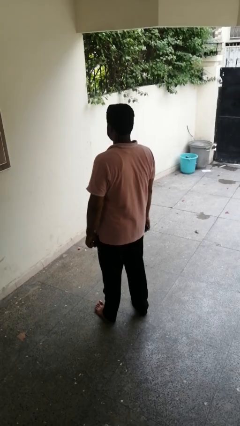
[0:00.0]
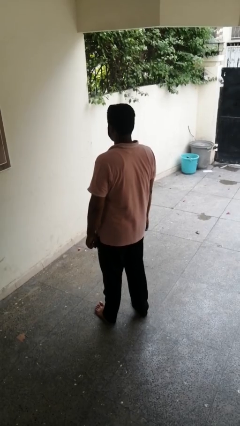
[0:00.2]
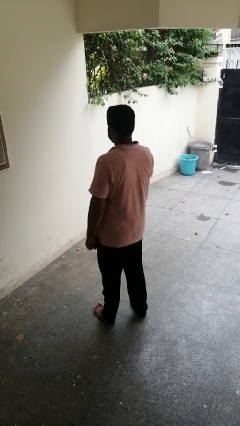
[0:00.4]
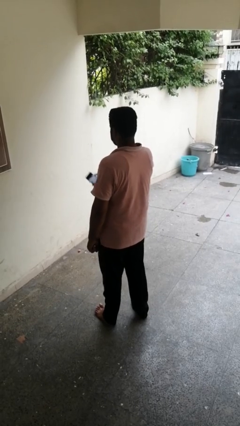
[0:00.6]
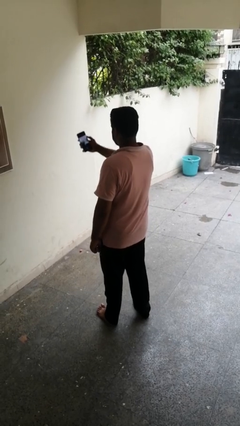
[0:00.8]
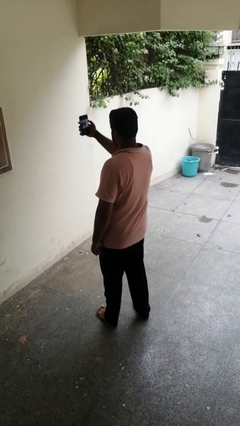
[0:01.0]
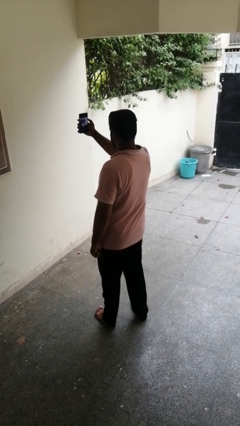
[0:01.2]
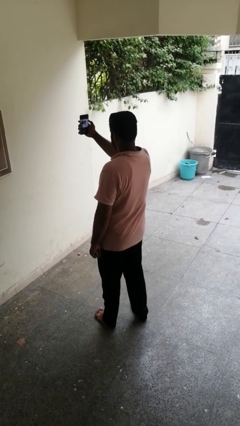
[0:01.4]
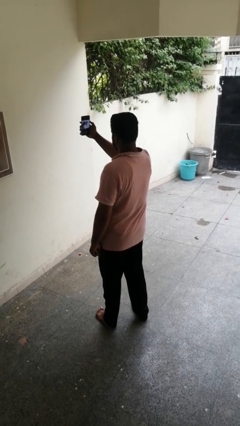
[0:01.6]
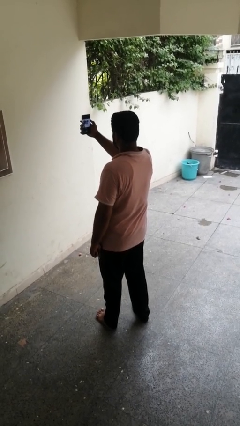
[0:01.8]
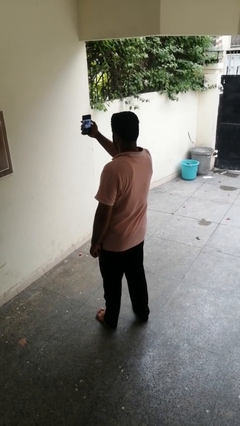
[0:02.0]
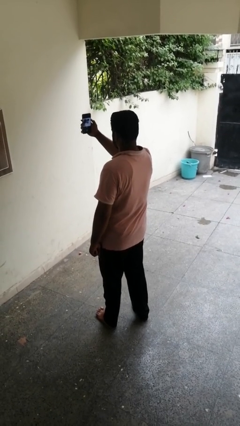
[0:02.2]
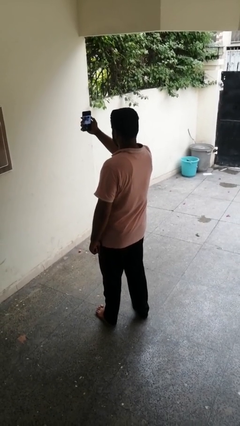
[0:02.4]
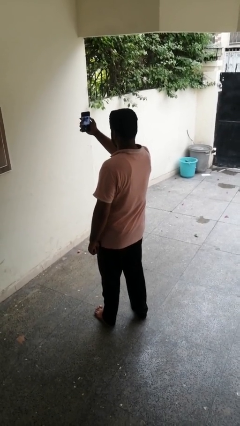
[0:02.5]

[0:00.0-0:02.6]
person takes selfie

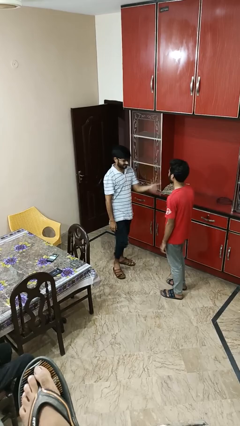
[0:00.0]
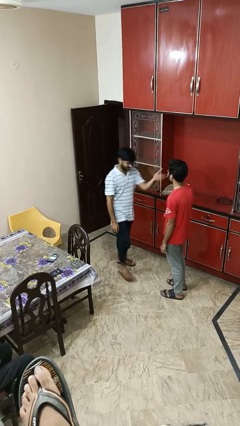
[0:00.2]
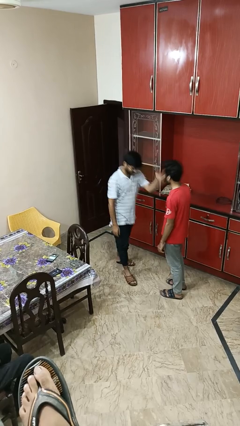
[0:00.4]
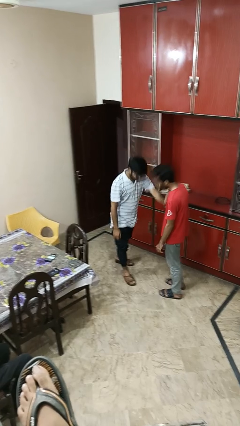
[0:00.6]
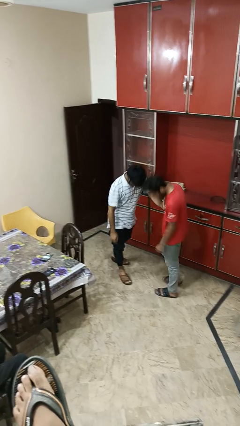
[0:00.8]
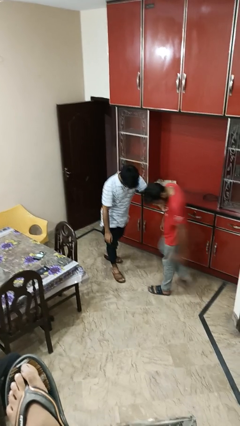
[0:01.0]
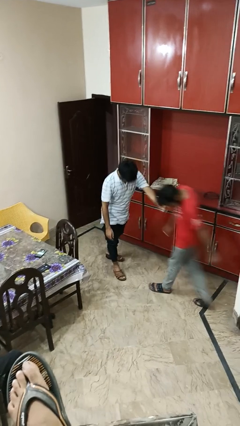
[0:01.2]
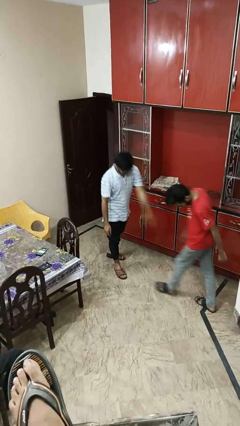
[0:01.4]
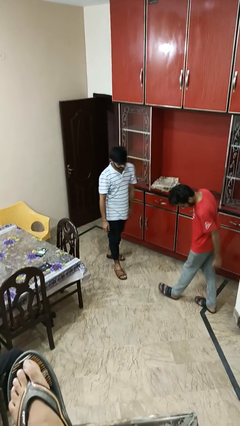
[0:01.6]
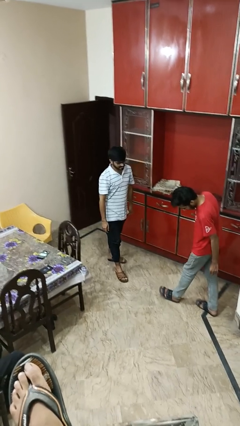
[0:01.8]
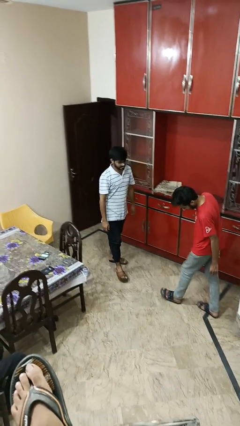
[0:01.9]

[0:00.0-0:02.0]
person shoves person

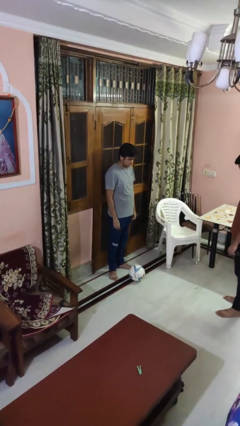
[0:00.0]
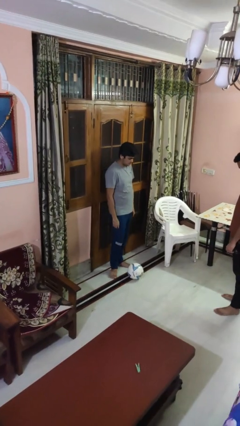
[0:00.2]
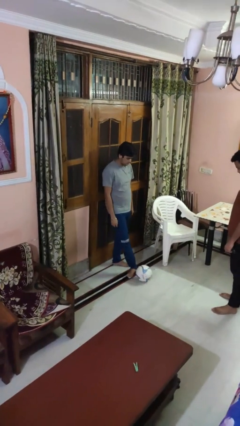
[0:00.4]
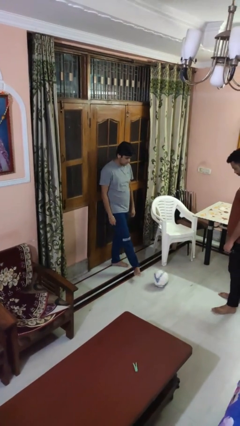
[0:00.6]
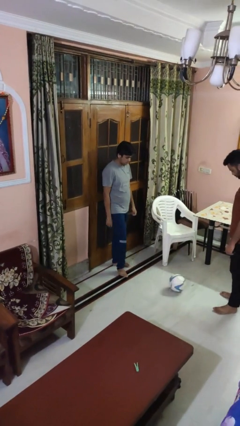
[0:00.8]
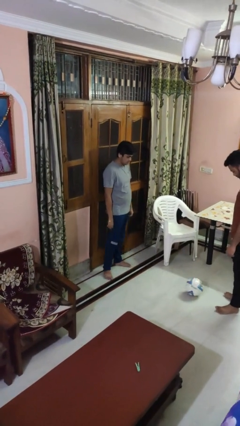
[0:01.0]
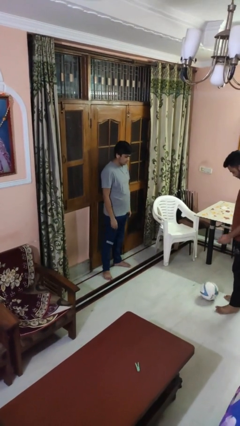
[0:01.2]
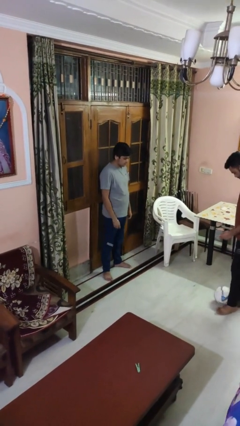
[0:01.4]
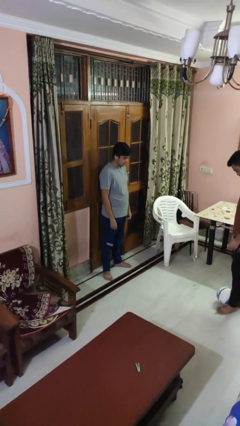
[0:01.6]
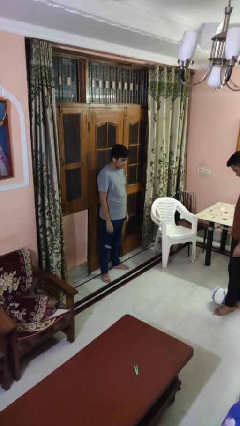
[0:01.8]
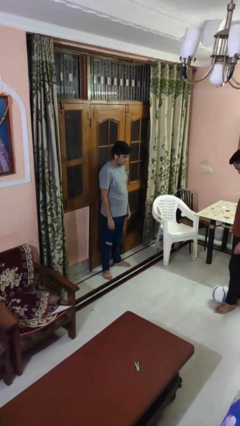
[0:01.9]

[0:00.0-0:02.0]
person kicks object to person

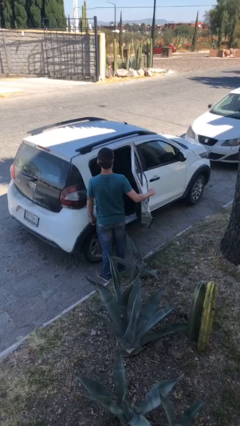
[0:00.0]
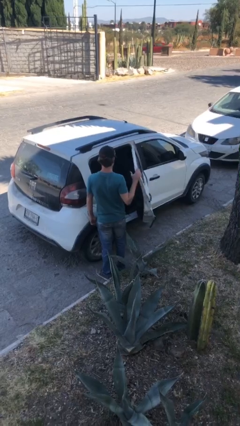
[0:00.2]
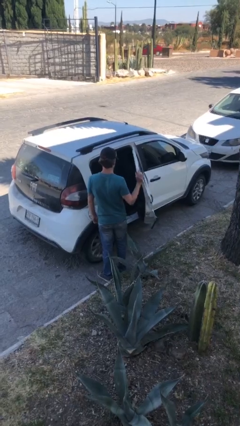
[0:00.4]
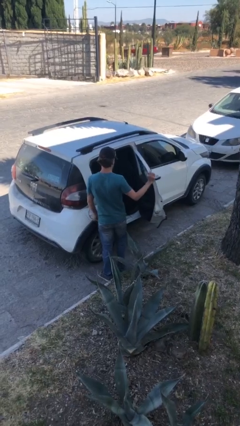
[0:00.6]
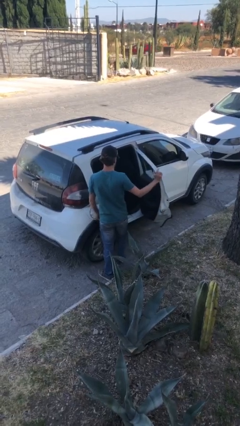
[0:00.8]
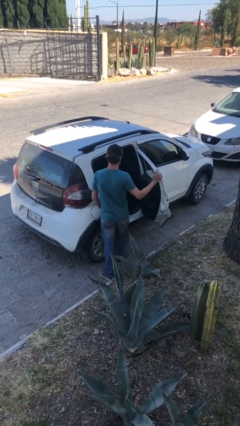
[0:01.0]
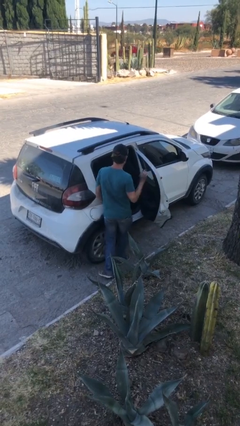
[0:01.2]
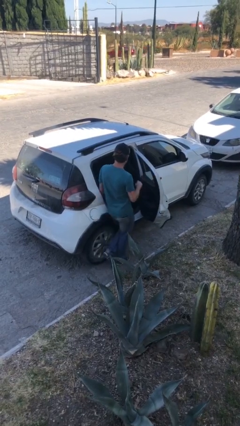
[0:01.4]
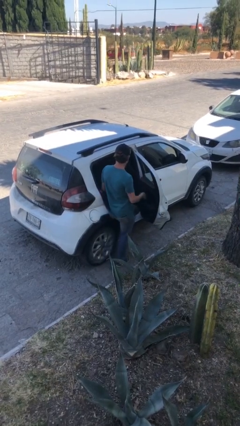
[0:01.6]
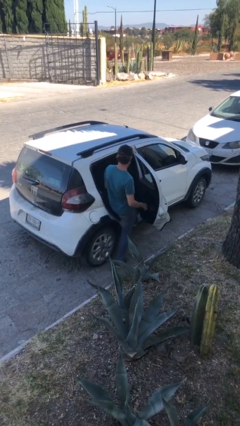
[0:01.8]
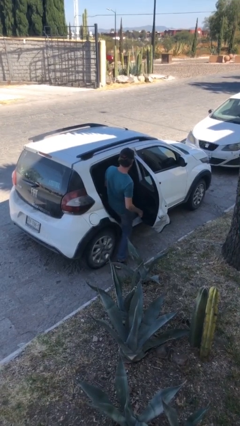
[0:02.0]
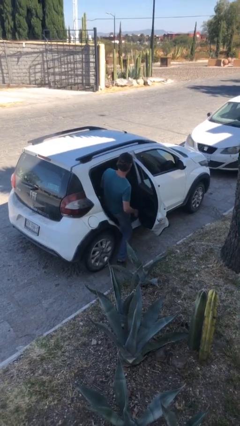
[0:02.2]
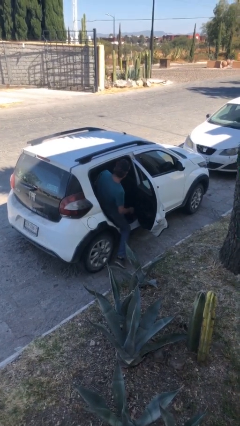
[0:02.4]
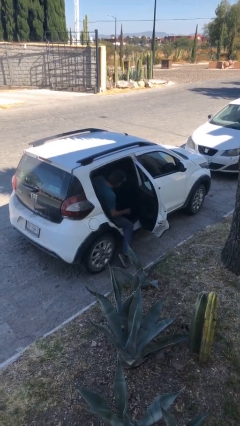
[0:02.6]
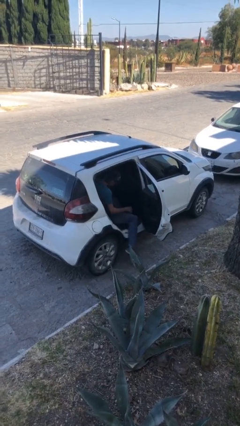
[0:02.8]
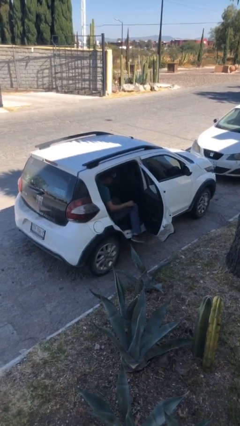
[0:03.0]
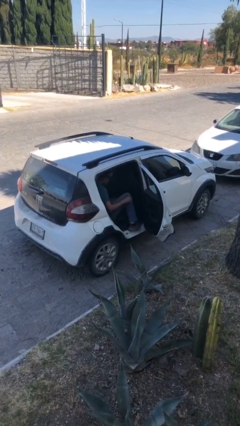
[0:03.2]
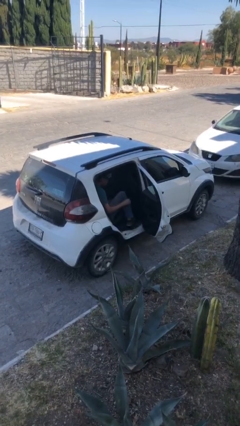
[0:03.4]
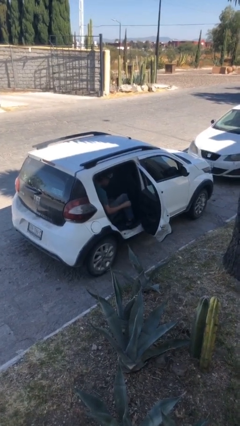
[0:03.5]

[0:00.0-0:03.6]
person enters car

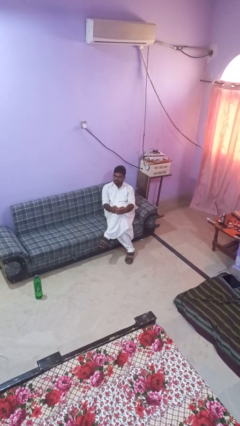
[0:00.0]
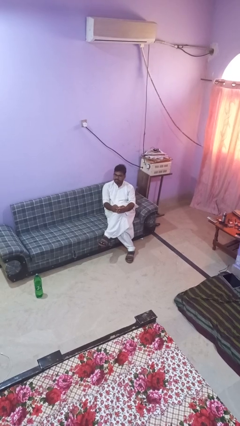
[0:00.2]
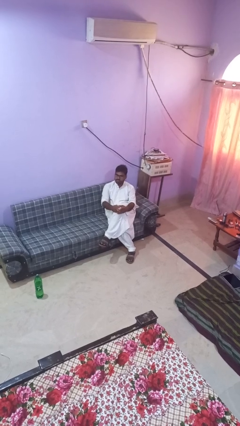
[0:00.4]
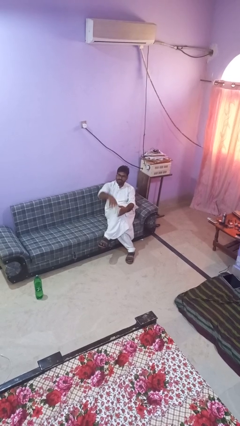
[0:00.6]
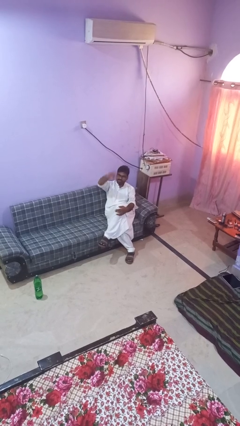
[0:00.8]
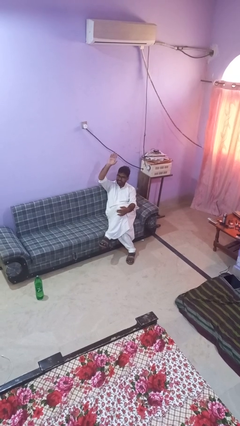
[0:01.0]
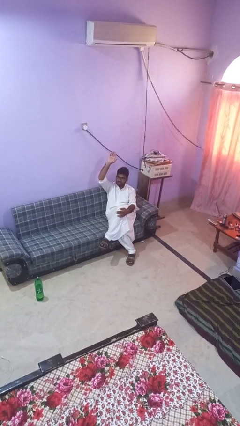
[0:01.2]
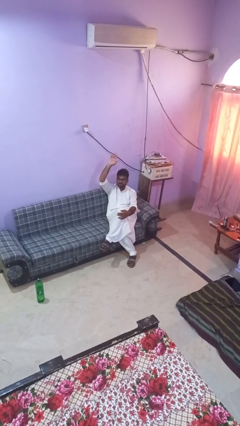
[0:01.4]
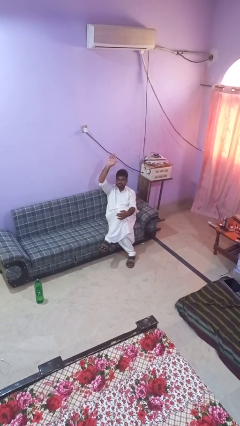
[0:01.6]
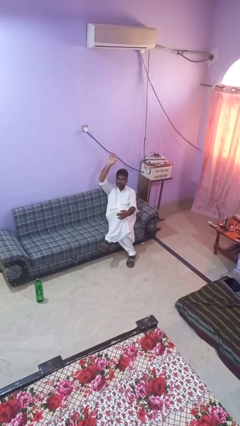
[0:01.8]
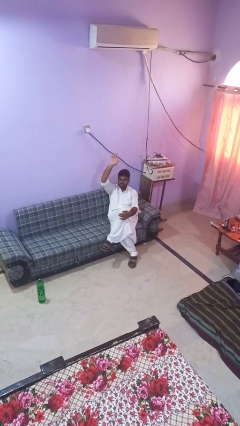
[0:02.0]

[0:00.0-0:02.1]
person gestures raise hand

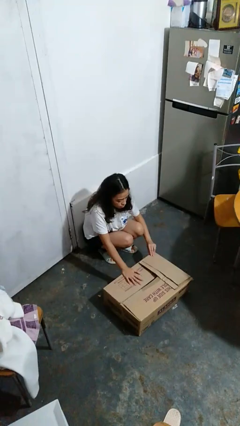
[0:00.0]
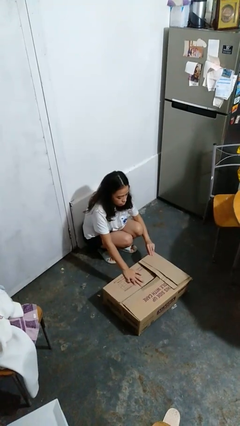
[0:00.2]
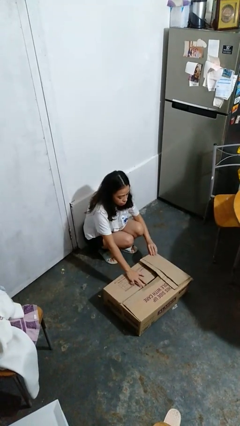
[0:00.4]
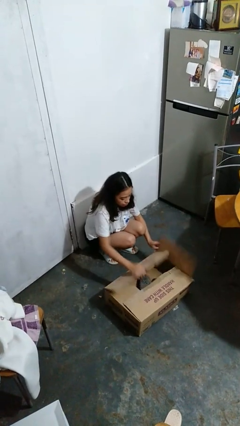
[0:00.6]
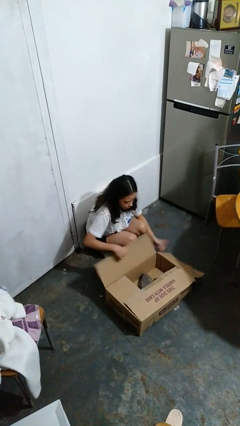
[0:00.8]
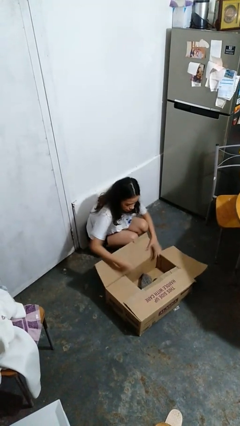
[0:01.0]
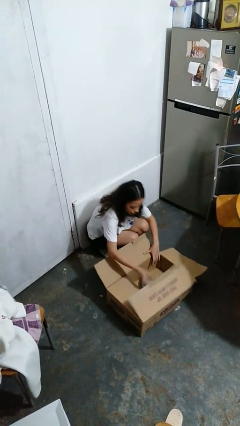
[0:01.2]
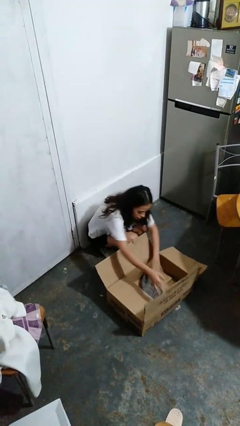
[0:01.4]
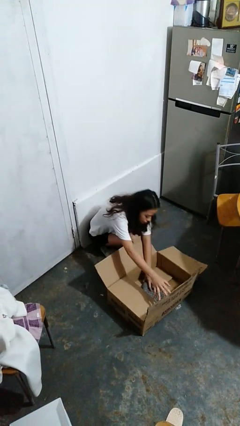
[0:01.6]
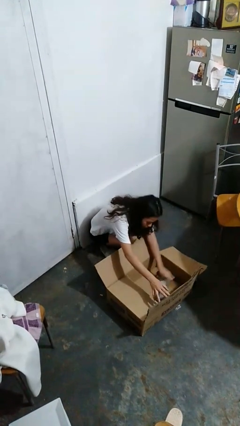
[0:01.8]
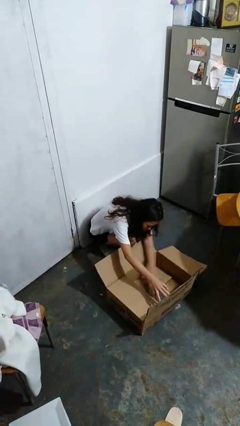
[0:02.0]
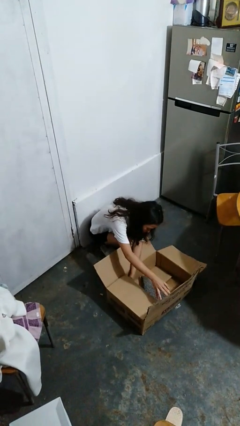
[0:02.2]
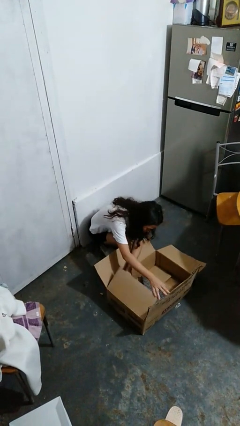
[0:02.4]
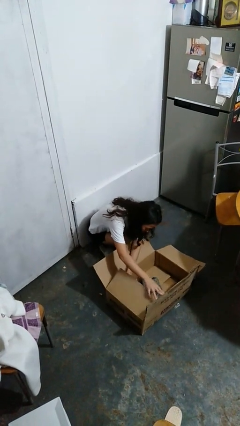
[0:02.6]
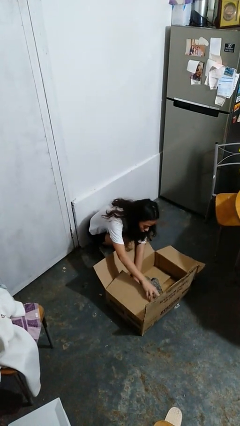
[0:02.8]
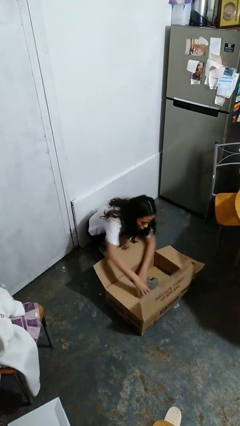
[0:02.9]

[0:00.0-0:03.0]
person searches in box

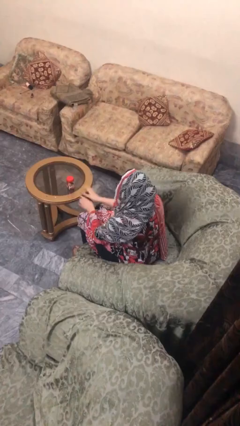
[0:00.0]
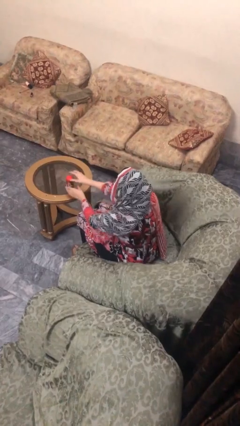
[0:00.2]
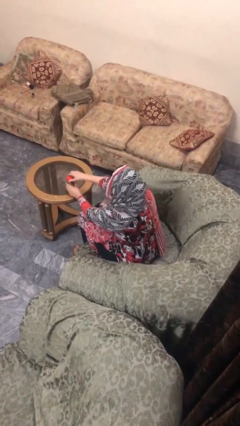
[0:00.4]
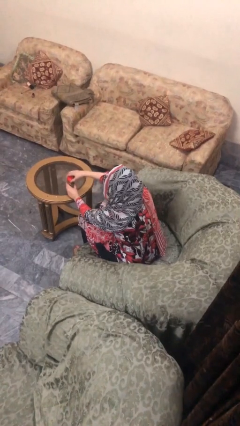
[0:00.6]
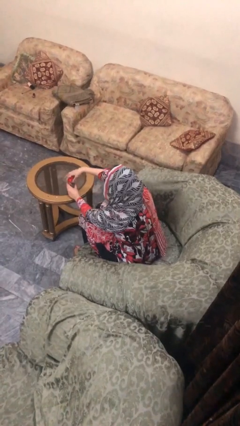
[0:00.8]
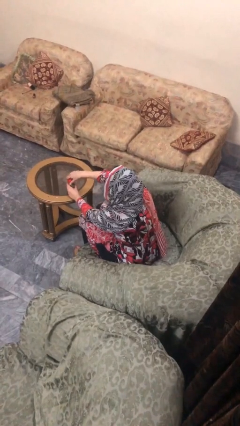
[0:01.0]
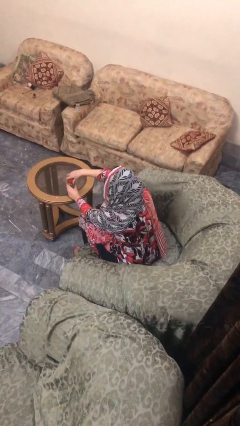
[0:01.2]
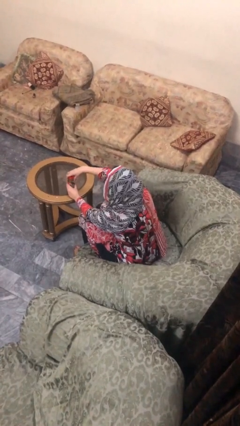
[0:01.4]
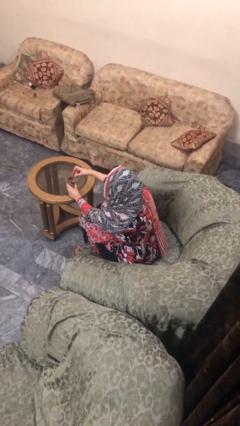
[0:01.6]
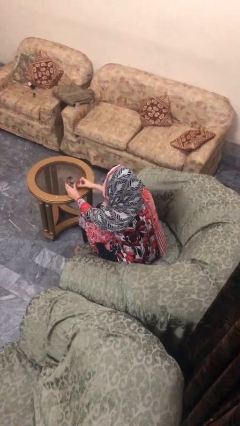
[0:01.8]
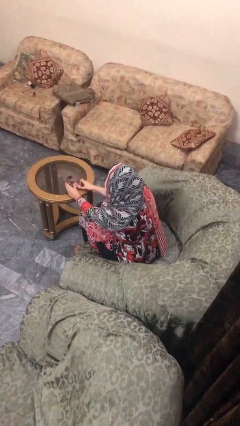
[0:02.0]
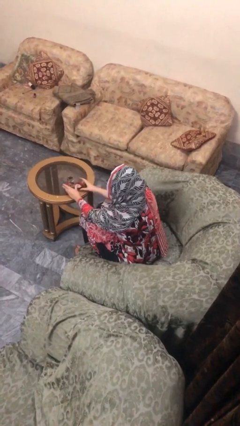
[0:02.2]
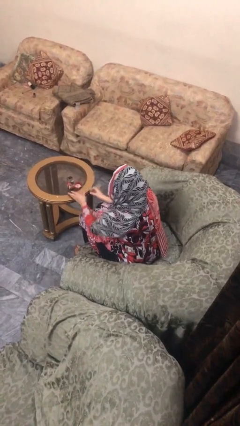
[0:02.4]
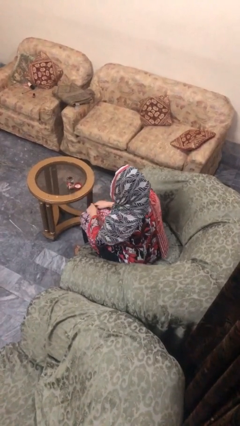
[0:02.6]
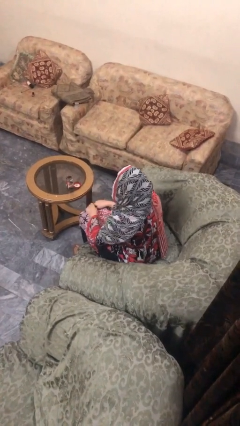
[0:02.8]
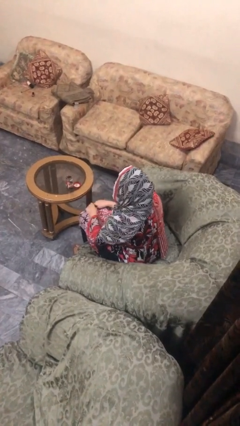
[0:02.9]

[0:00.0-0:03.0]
person opens jar
